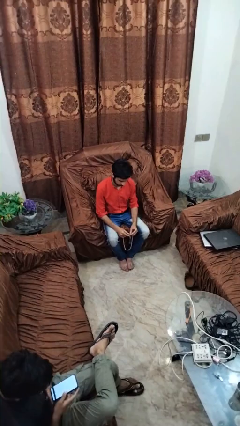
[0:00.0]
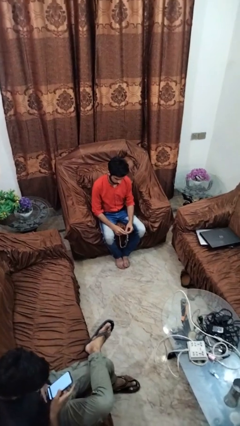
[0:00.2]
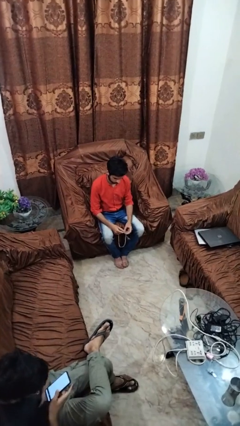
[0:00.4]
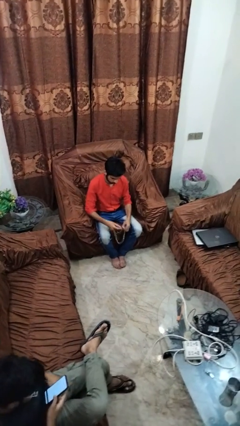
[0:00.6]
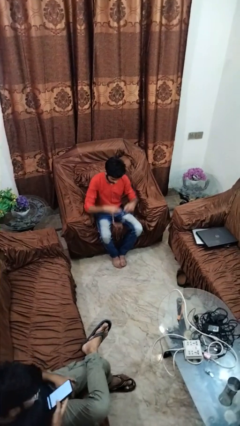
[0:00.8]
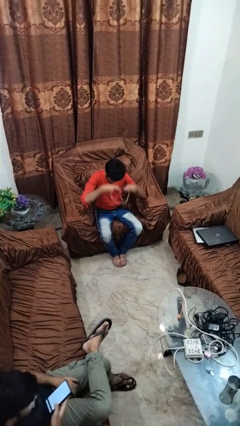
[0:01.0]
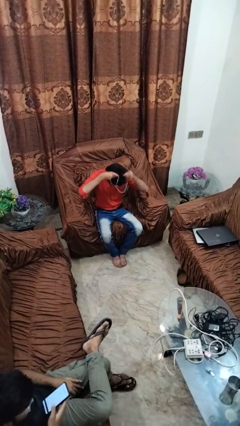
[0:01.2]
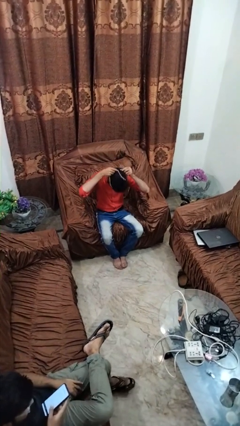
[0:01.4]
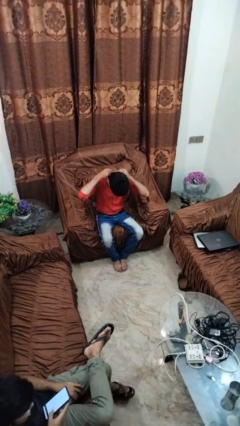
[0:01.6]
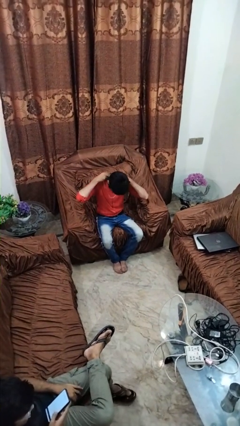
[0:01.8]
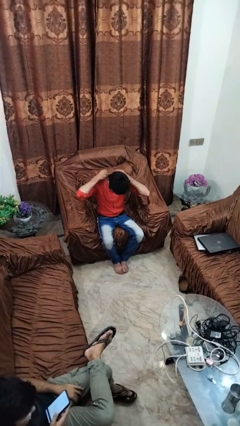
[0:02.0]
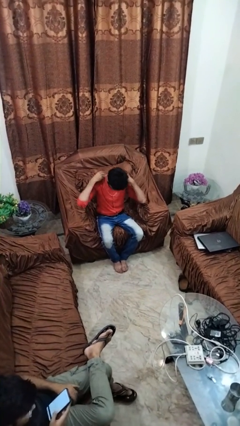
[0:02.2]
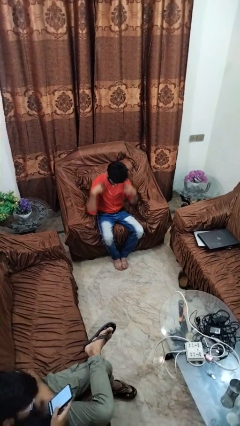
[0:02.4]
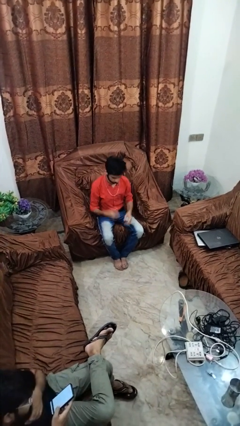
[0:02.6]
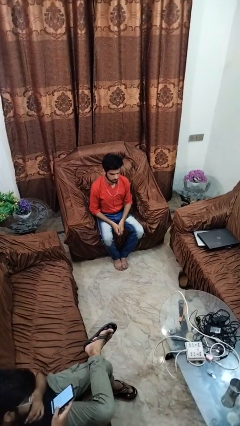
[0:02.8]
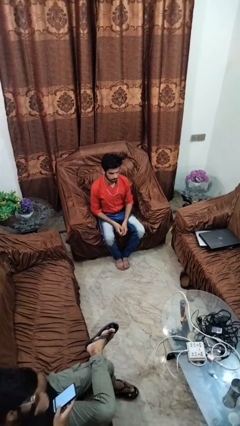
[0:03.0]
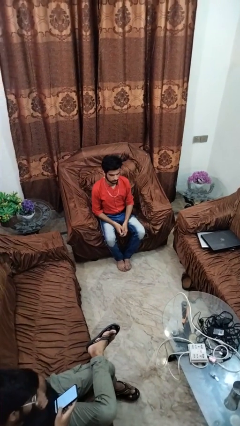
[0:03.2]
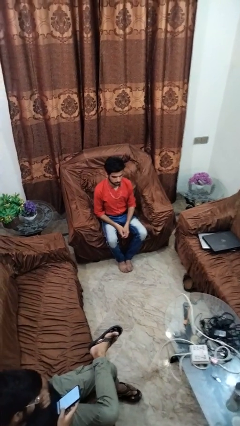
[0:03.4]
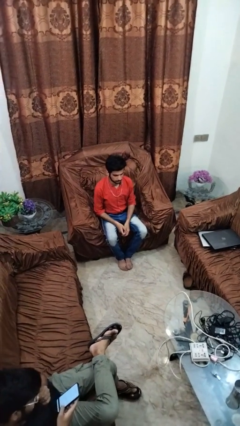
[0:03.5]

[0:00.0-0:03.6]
person puts on necklace

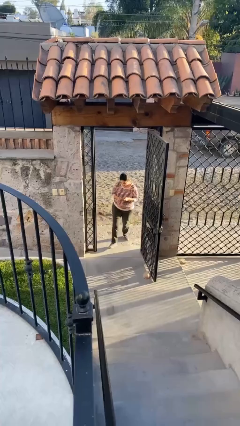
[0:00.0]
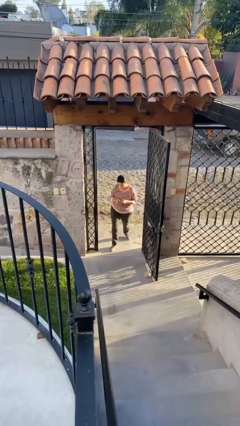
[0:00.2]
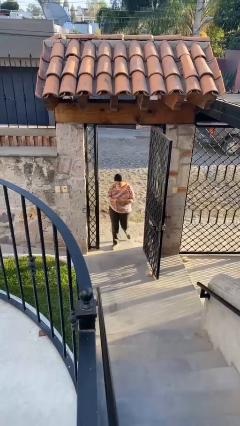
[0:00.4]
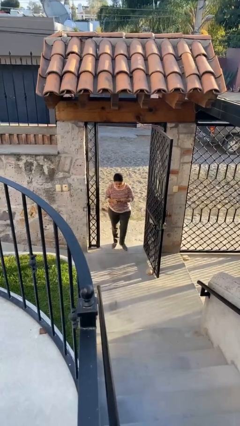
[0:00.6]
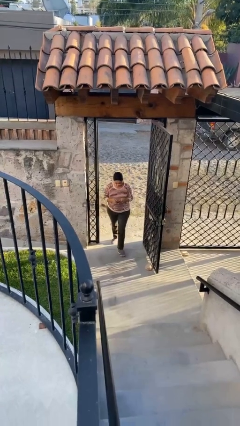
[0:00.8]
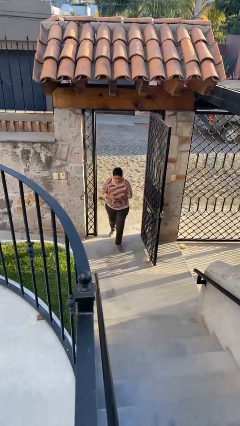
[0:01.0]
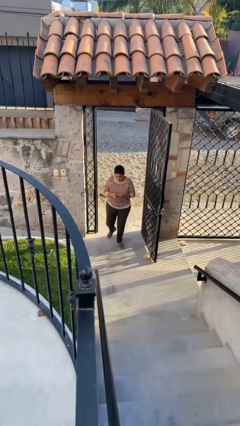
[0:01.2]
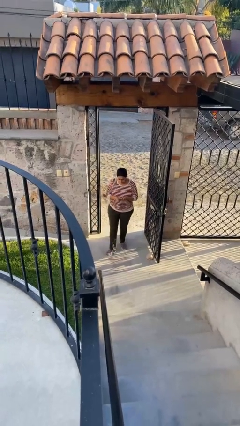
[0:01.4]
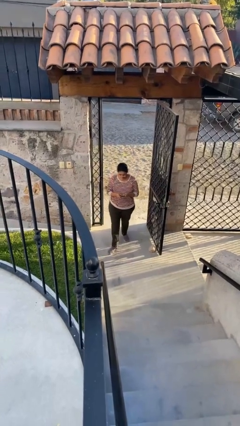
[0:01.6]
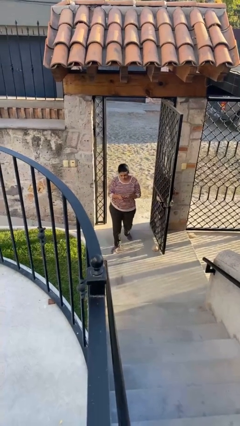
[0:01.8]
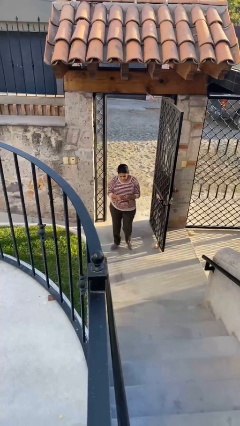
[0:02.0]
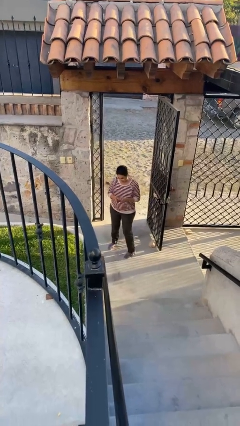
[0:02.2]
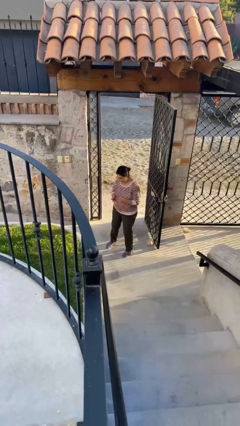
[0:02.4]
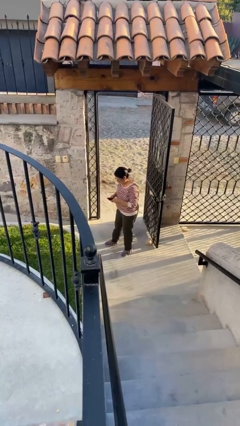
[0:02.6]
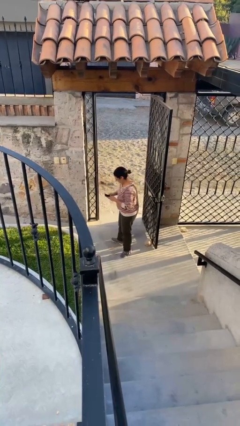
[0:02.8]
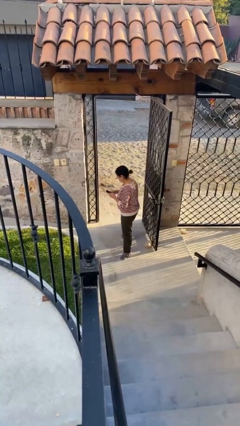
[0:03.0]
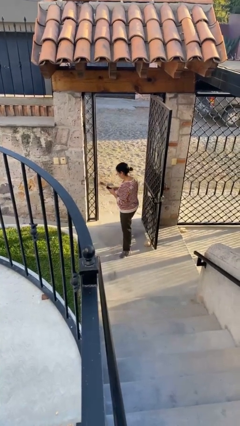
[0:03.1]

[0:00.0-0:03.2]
person enters scene through structure

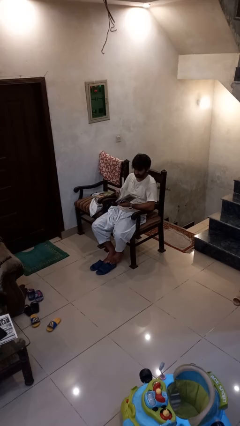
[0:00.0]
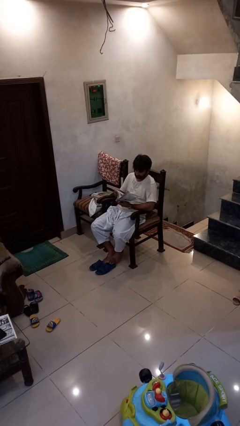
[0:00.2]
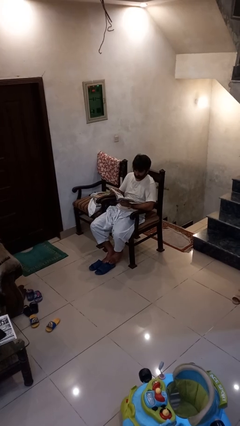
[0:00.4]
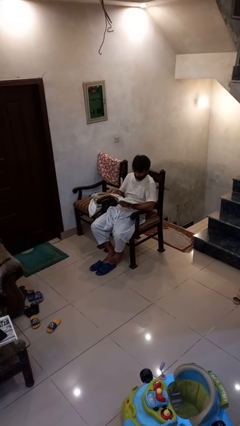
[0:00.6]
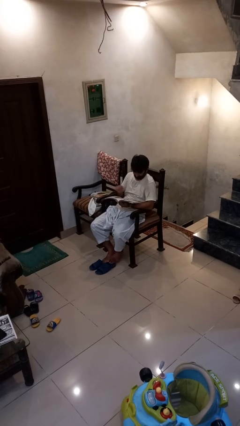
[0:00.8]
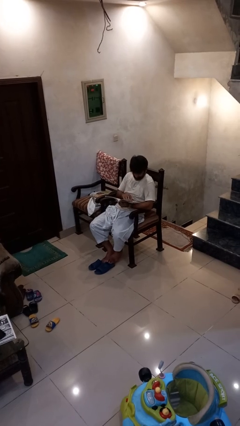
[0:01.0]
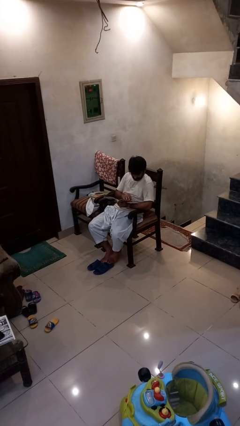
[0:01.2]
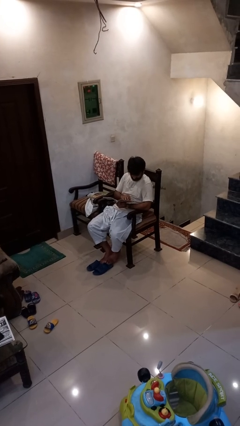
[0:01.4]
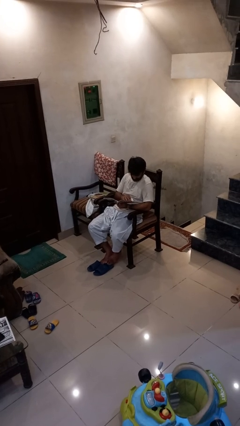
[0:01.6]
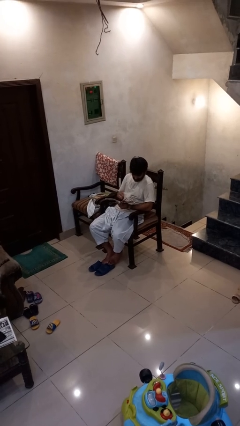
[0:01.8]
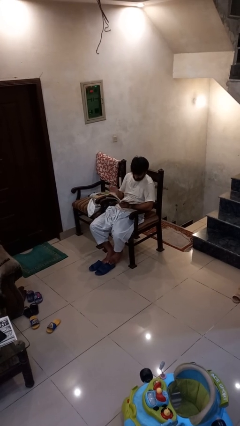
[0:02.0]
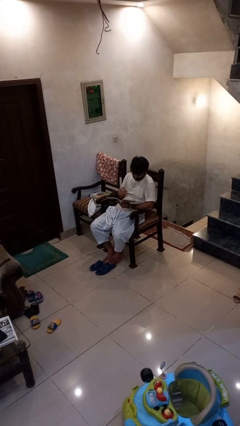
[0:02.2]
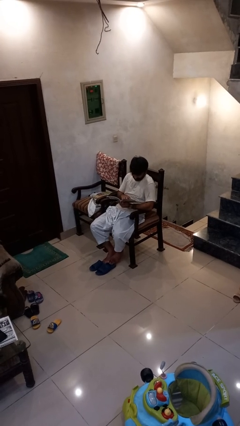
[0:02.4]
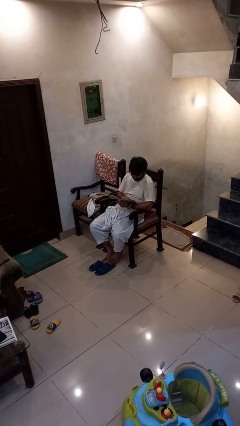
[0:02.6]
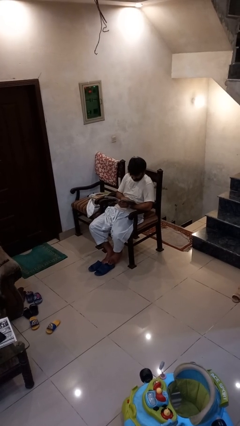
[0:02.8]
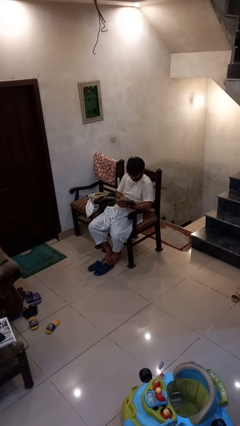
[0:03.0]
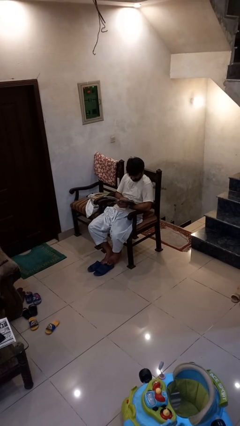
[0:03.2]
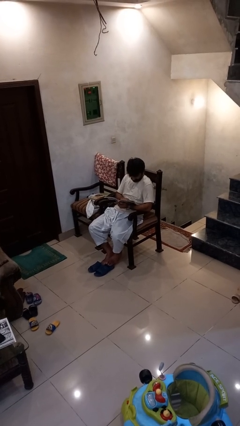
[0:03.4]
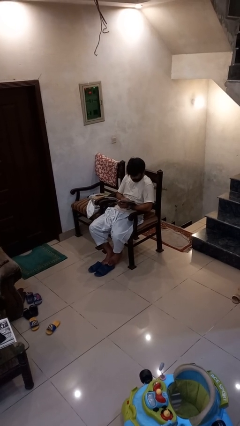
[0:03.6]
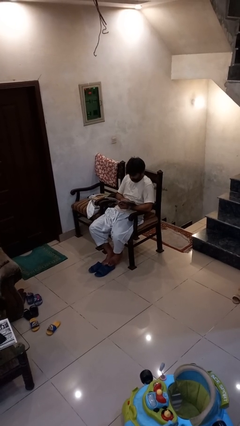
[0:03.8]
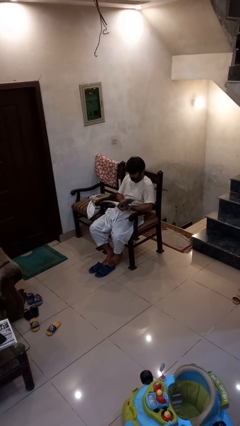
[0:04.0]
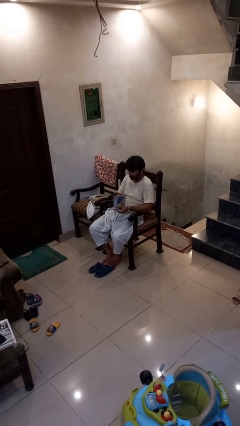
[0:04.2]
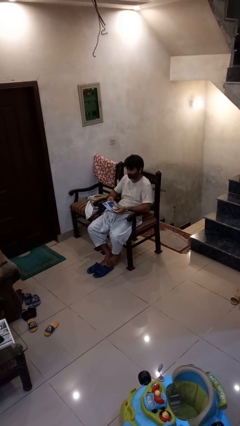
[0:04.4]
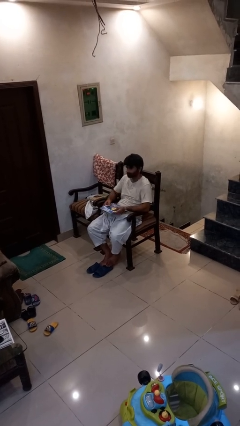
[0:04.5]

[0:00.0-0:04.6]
person reads book

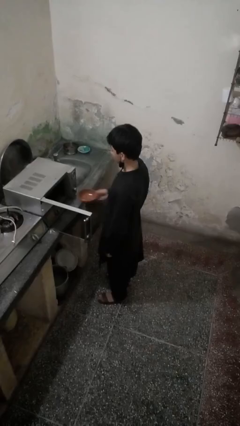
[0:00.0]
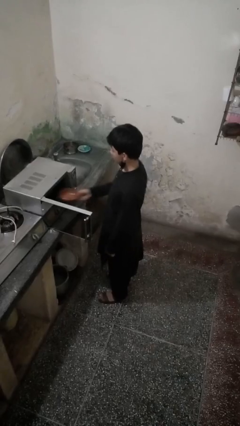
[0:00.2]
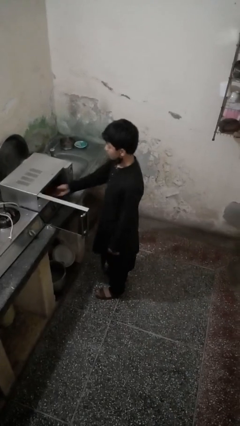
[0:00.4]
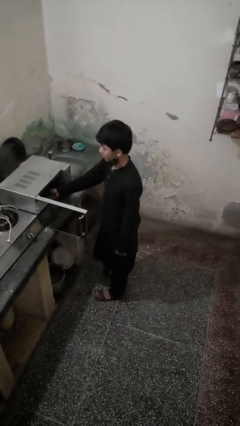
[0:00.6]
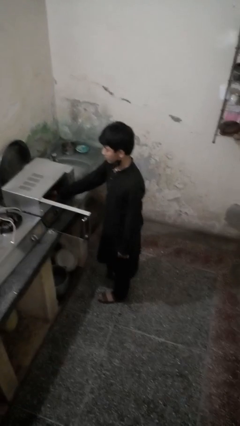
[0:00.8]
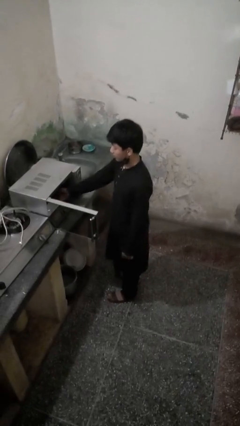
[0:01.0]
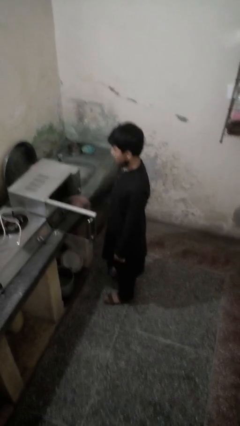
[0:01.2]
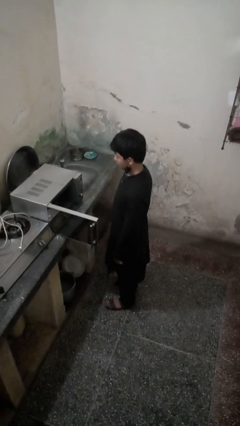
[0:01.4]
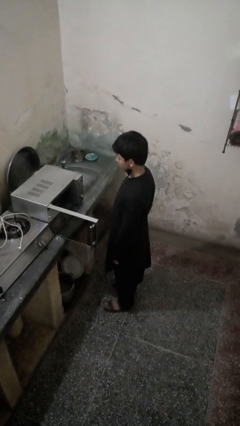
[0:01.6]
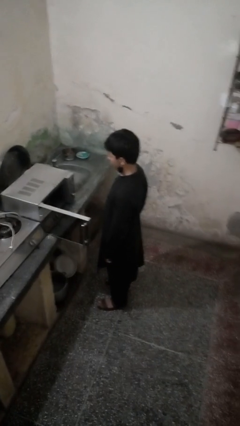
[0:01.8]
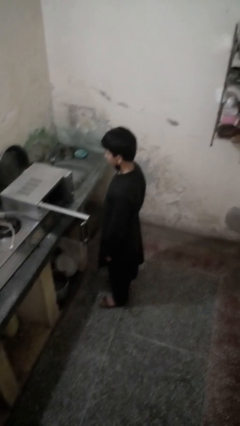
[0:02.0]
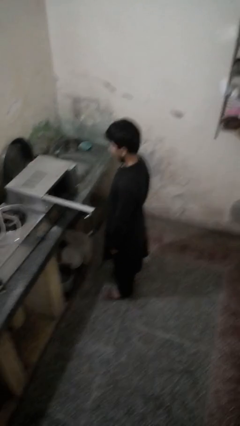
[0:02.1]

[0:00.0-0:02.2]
person puts object into microwave

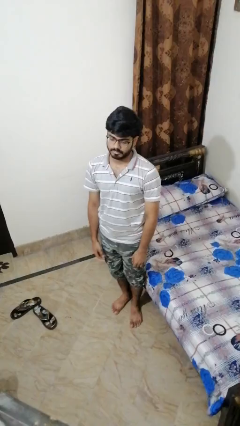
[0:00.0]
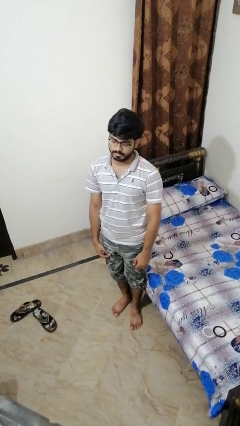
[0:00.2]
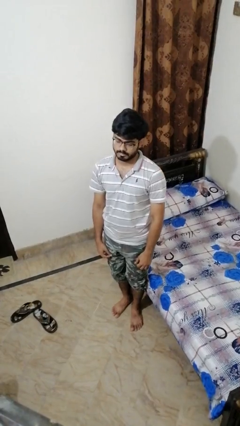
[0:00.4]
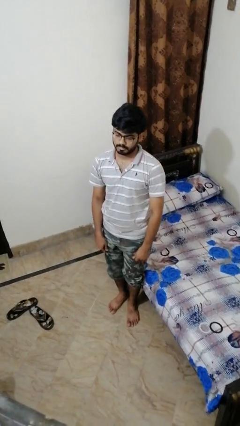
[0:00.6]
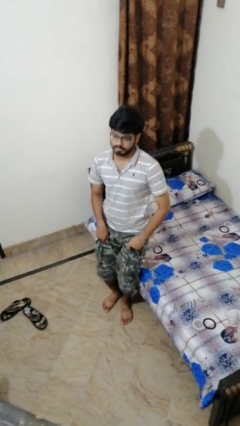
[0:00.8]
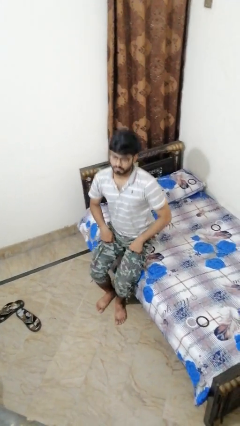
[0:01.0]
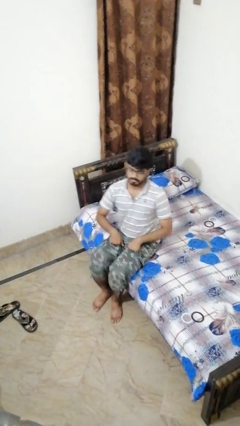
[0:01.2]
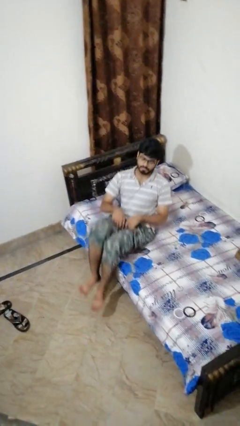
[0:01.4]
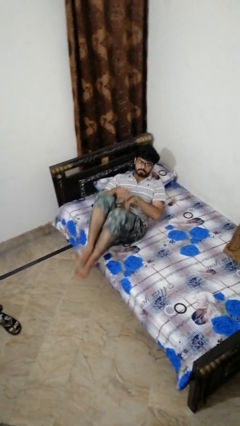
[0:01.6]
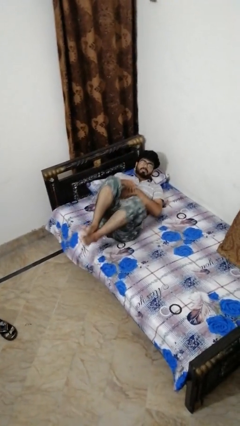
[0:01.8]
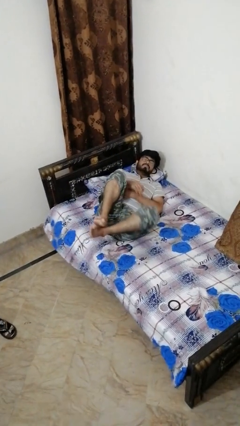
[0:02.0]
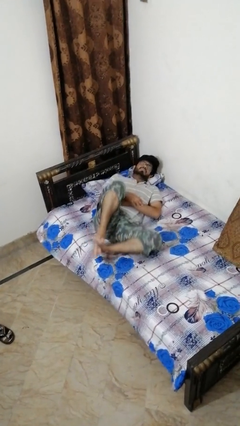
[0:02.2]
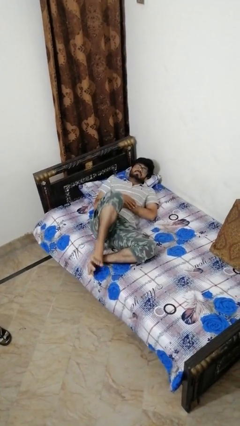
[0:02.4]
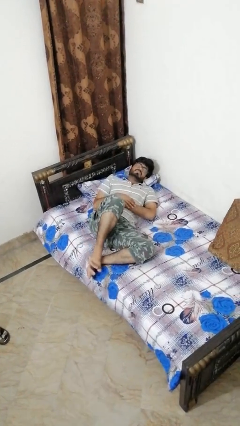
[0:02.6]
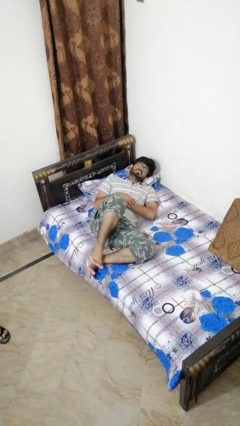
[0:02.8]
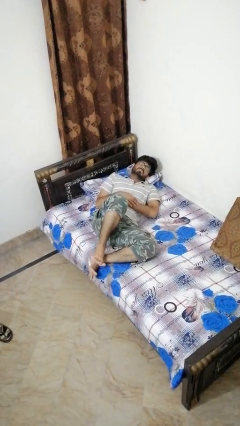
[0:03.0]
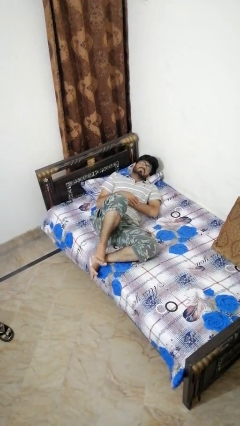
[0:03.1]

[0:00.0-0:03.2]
person lies down on bed

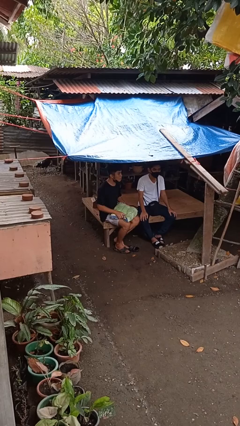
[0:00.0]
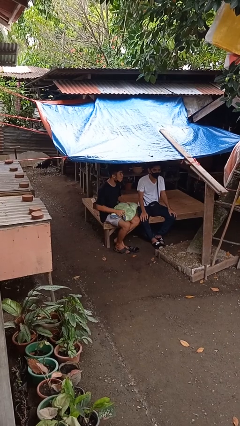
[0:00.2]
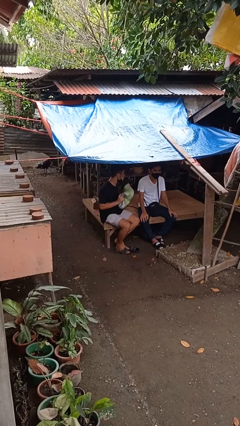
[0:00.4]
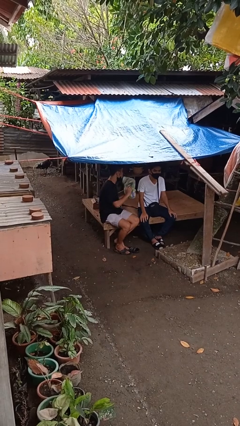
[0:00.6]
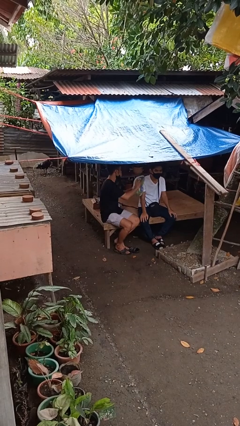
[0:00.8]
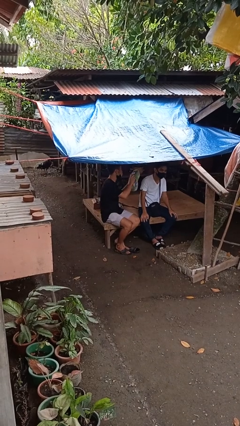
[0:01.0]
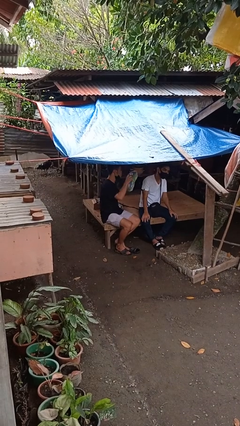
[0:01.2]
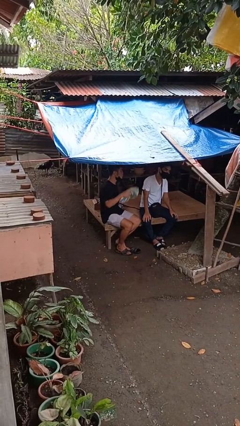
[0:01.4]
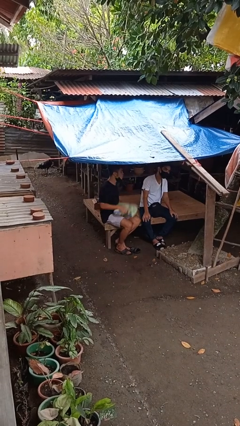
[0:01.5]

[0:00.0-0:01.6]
person hits person with pillow
